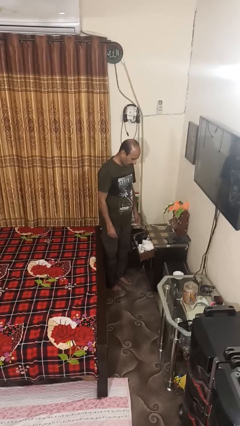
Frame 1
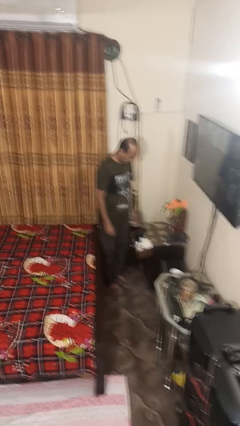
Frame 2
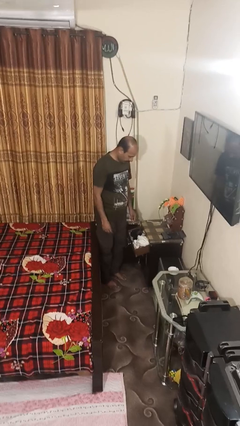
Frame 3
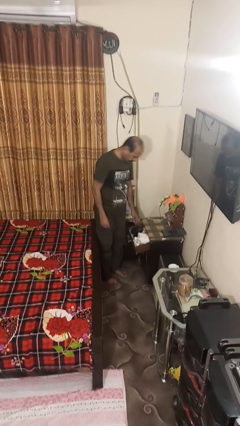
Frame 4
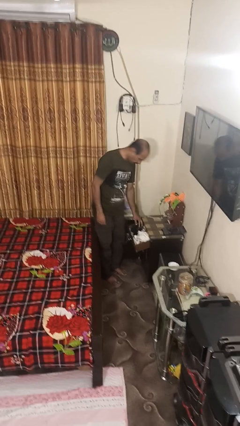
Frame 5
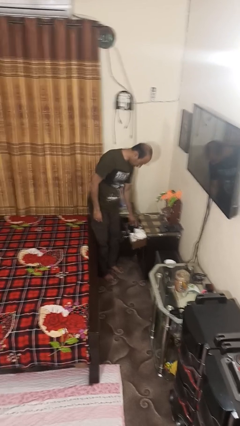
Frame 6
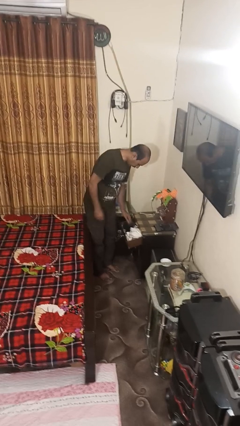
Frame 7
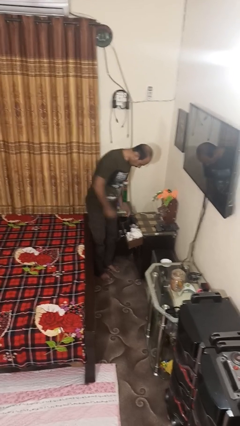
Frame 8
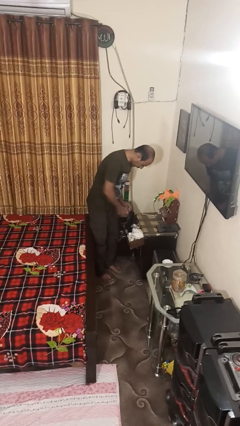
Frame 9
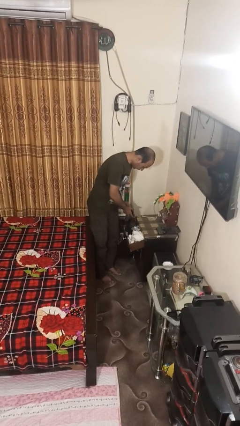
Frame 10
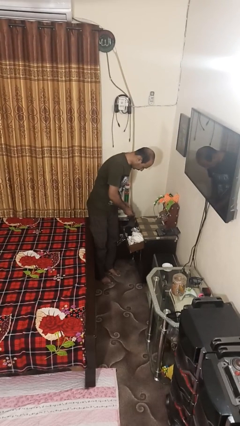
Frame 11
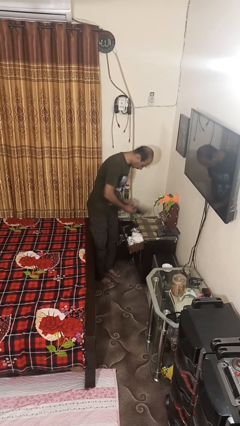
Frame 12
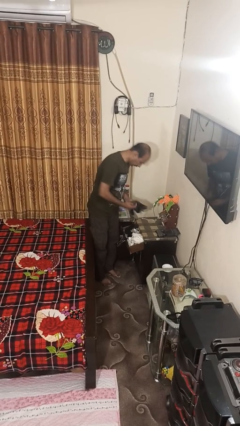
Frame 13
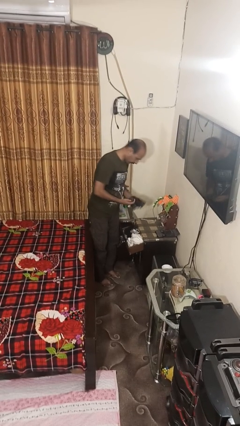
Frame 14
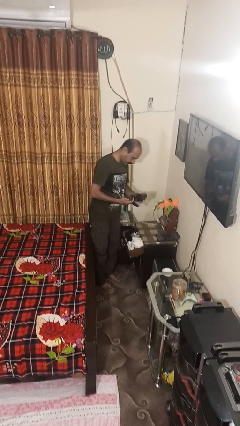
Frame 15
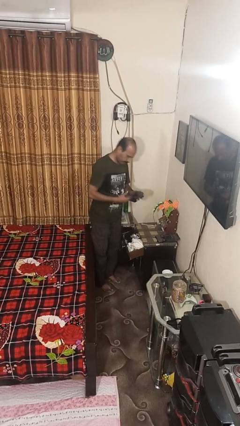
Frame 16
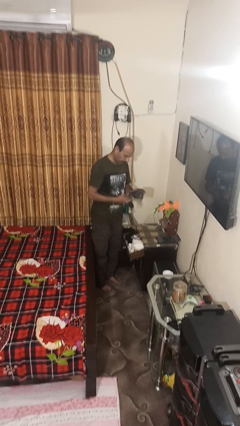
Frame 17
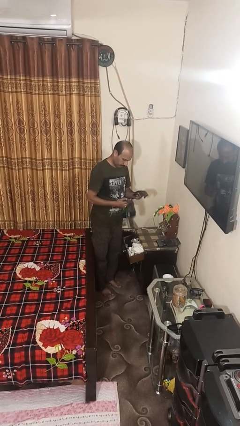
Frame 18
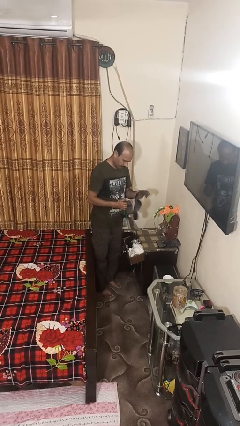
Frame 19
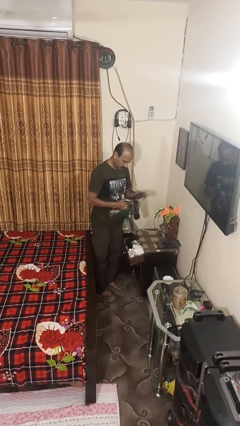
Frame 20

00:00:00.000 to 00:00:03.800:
person takes clothes from dresser

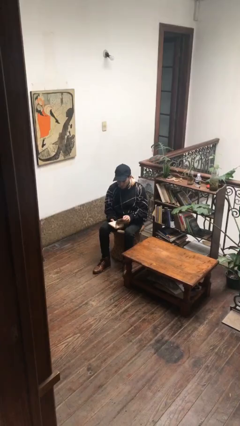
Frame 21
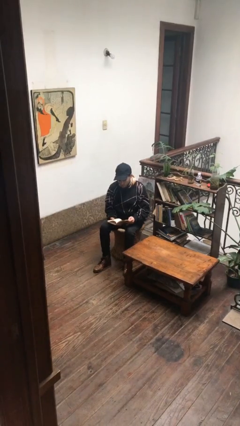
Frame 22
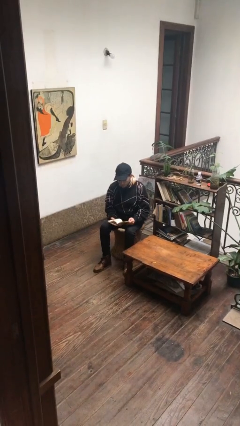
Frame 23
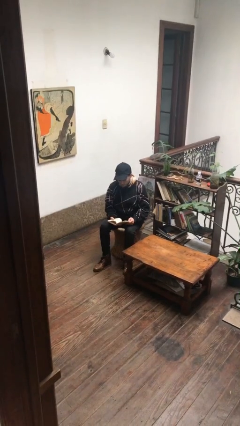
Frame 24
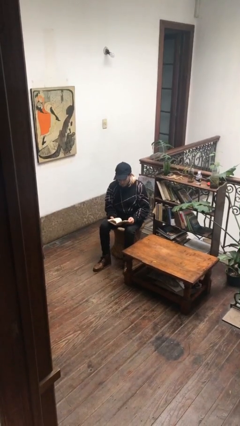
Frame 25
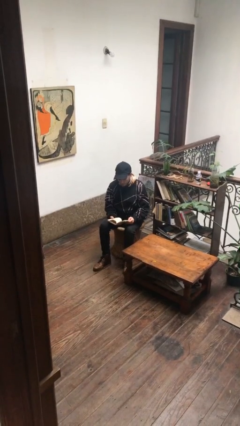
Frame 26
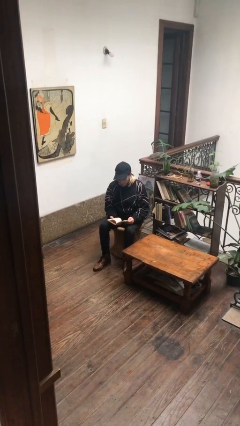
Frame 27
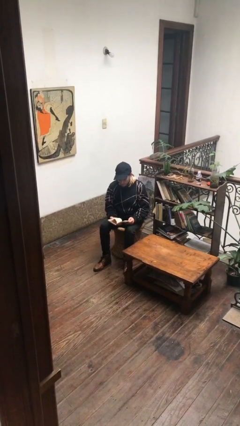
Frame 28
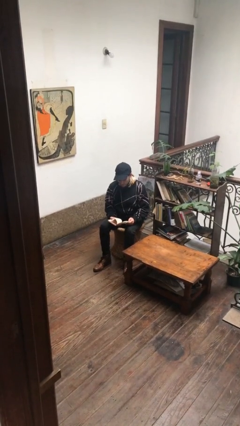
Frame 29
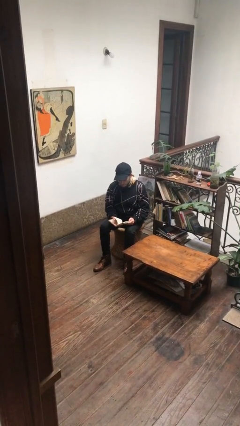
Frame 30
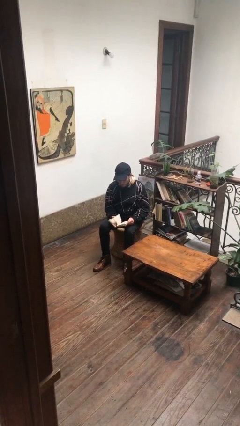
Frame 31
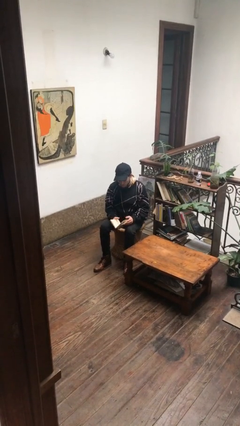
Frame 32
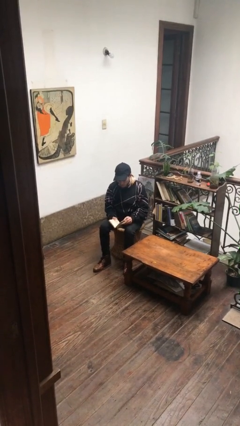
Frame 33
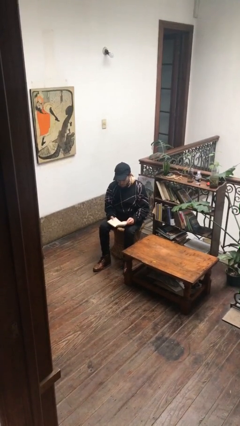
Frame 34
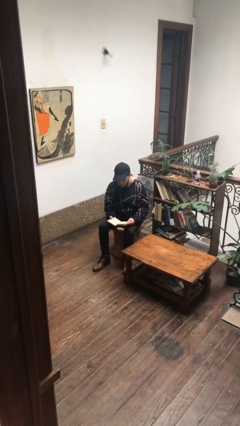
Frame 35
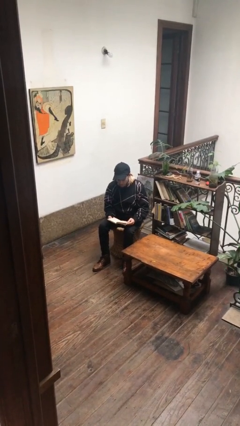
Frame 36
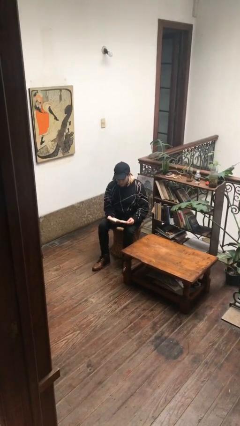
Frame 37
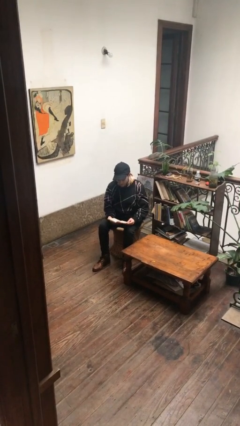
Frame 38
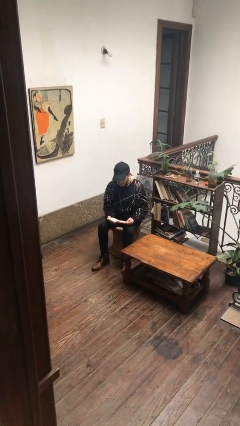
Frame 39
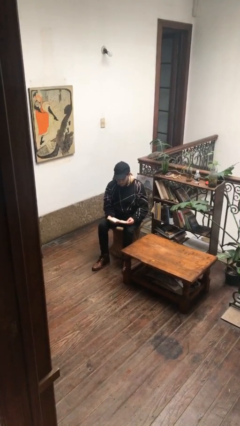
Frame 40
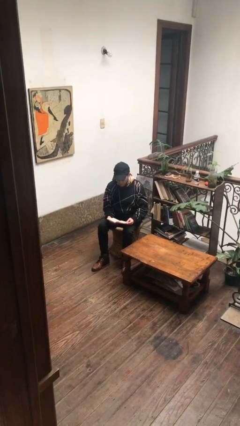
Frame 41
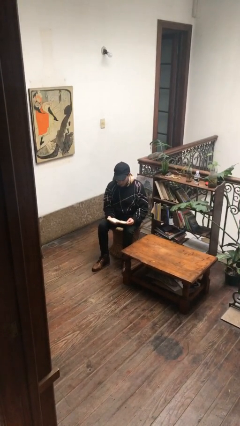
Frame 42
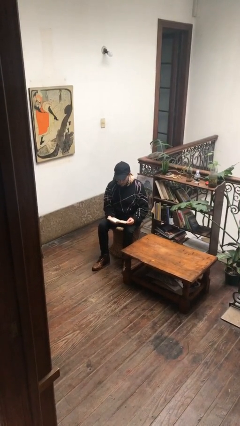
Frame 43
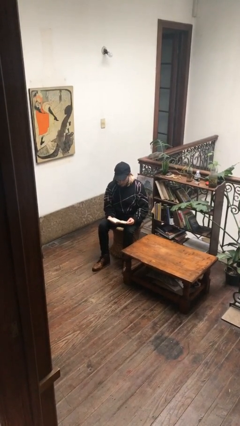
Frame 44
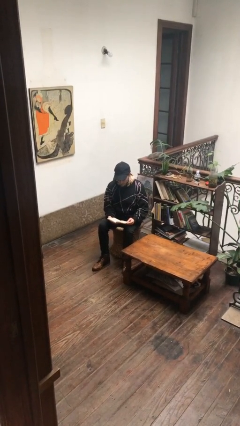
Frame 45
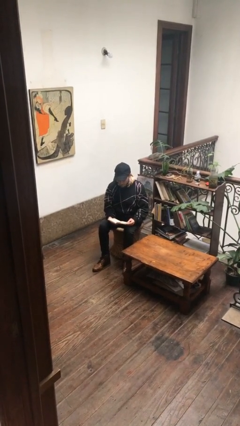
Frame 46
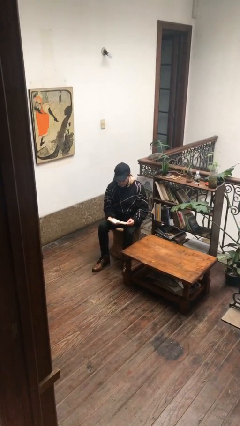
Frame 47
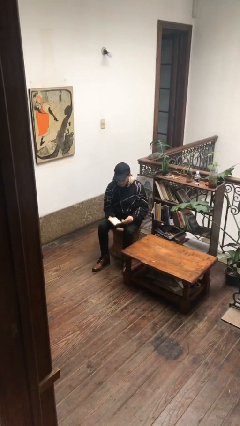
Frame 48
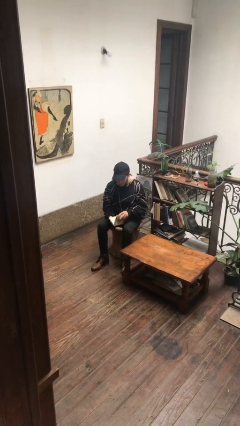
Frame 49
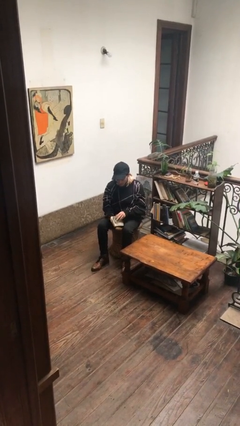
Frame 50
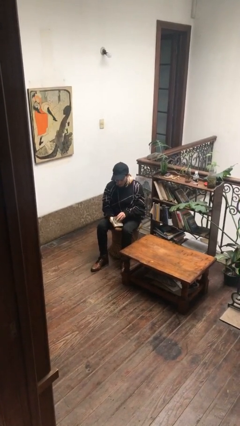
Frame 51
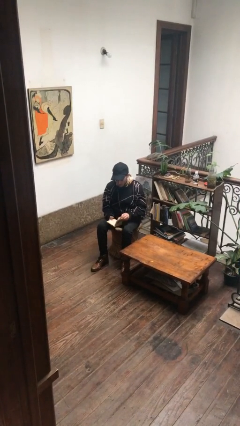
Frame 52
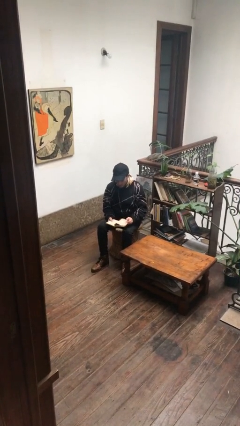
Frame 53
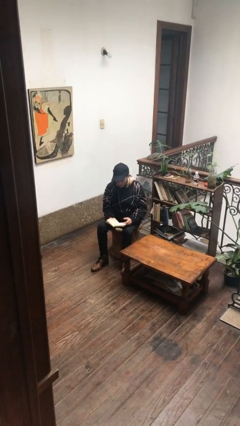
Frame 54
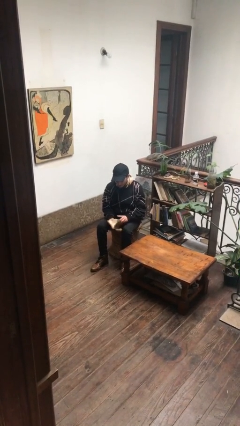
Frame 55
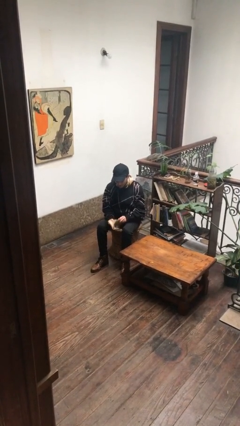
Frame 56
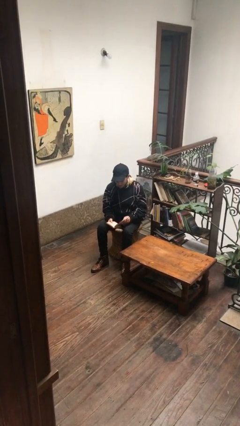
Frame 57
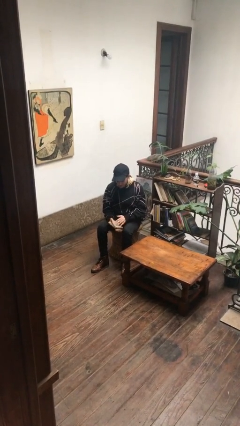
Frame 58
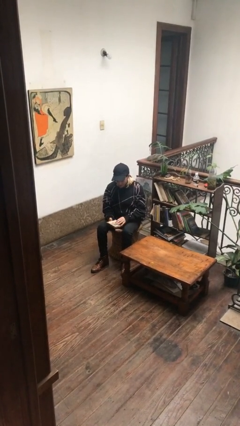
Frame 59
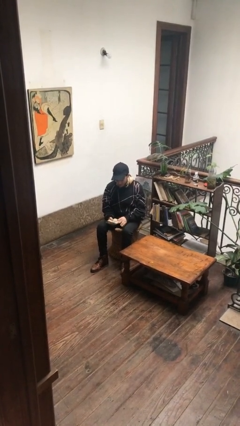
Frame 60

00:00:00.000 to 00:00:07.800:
person reads document

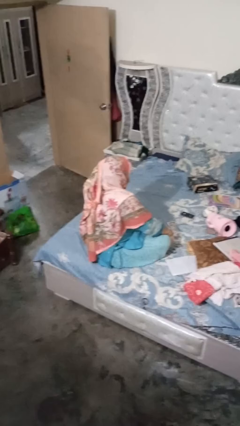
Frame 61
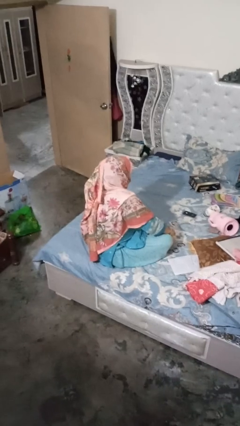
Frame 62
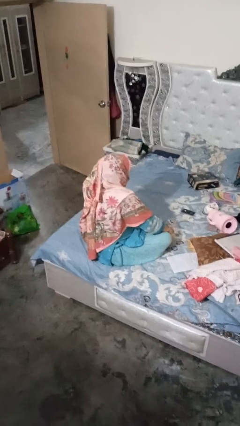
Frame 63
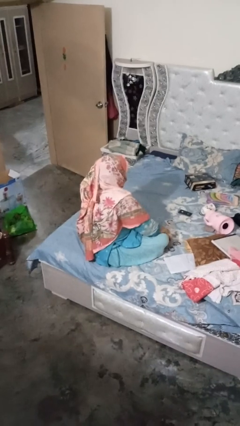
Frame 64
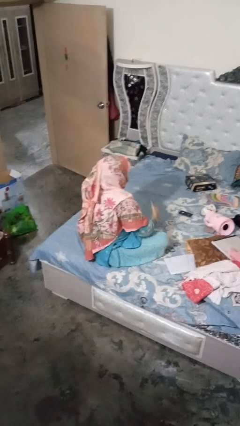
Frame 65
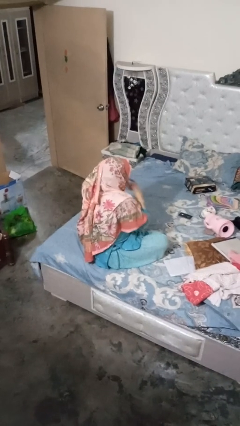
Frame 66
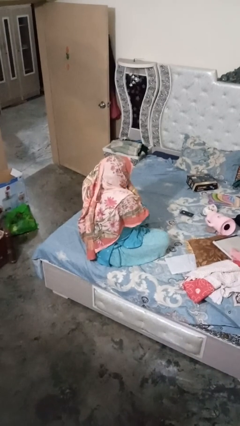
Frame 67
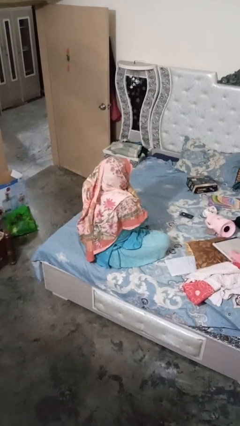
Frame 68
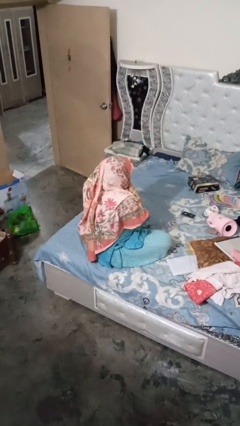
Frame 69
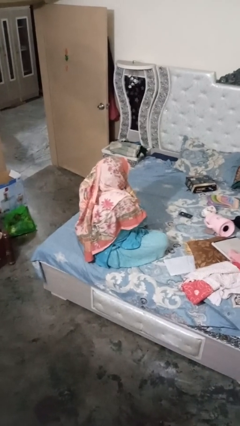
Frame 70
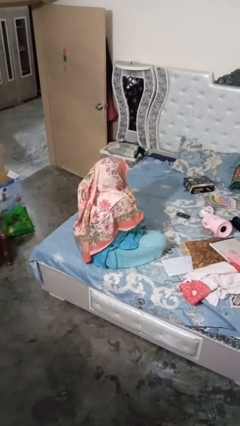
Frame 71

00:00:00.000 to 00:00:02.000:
person strokes chin

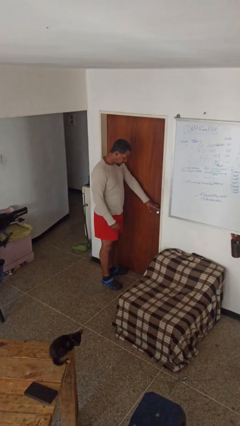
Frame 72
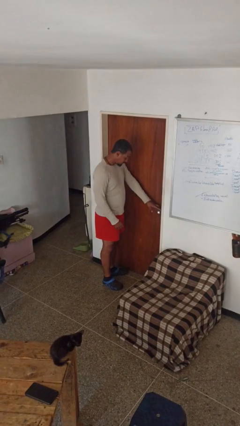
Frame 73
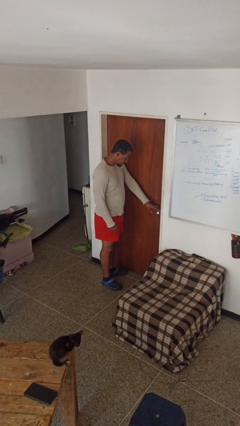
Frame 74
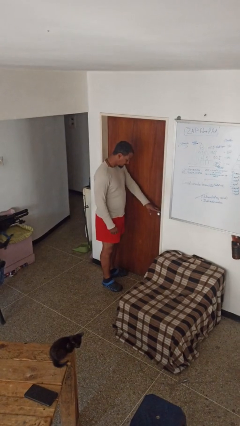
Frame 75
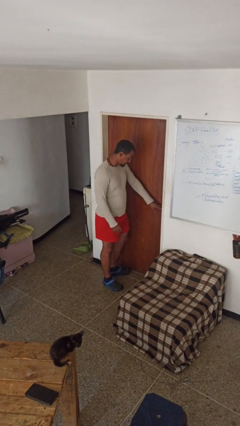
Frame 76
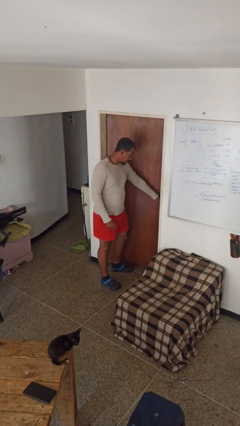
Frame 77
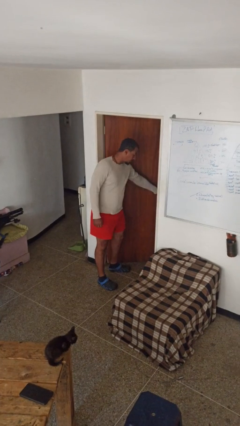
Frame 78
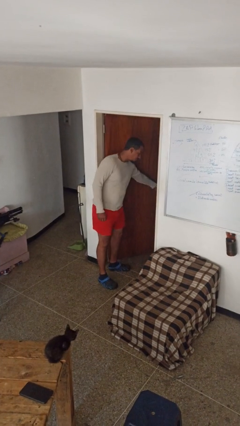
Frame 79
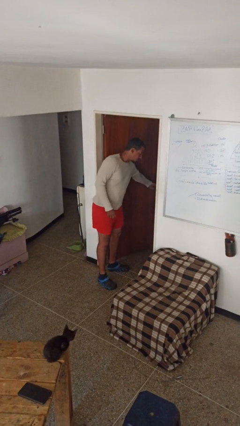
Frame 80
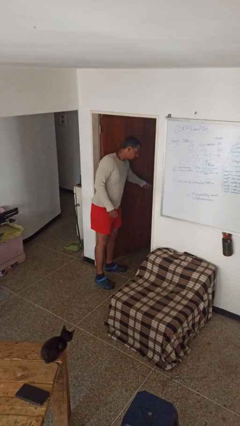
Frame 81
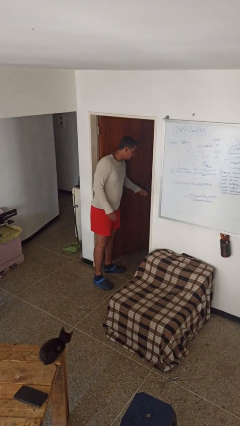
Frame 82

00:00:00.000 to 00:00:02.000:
person opens facility door

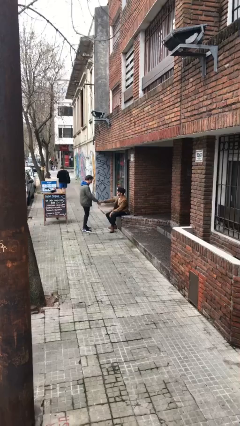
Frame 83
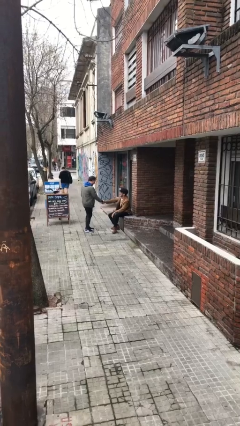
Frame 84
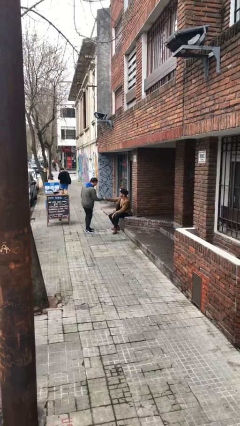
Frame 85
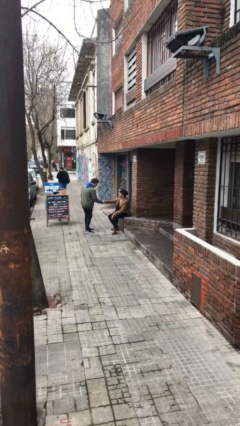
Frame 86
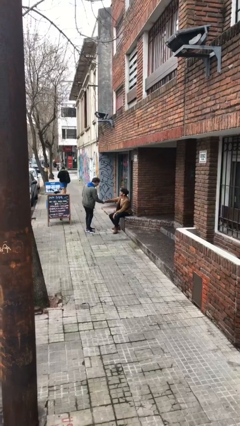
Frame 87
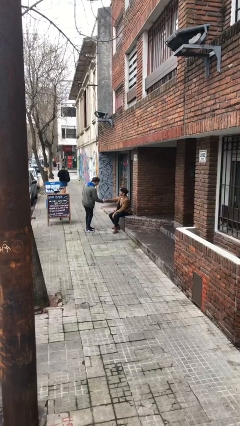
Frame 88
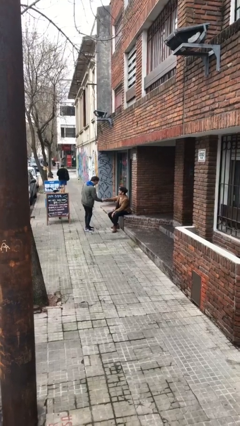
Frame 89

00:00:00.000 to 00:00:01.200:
person shakes hand

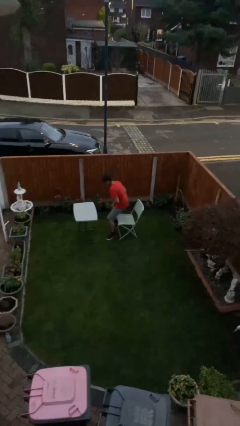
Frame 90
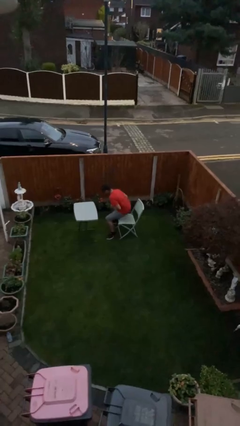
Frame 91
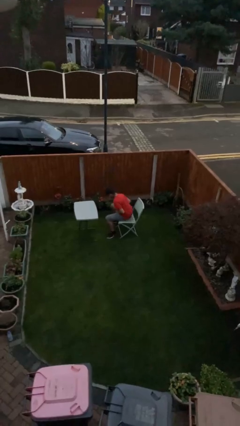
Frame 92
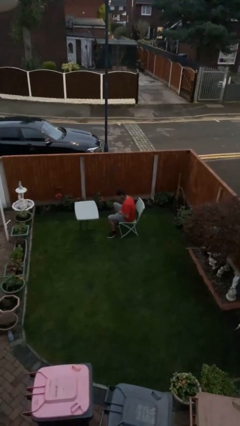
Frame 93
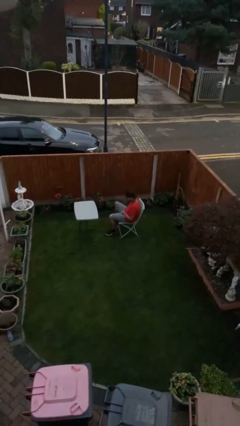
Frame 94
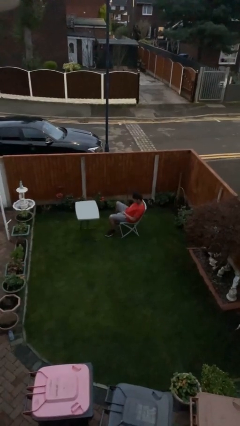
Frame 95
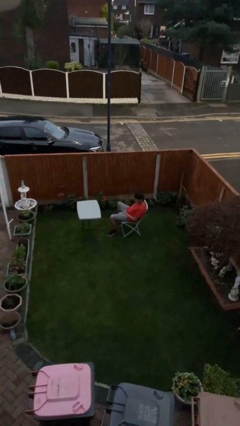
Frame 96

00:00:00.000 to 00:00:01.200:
person sits down
